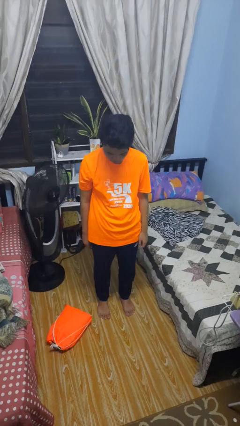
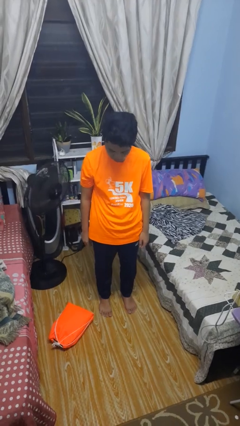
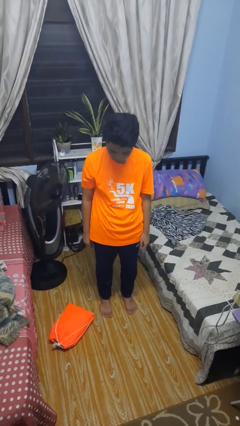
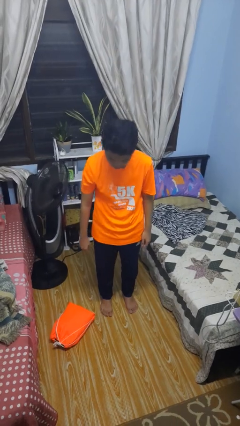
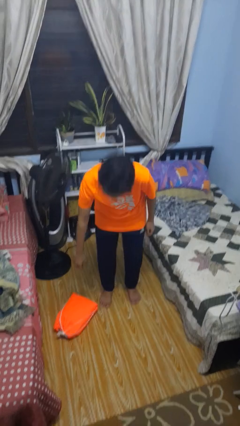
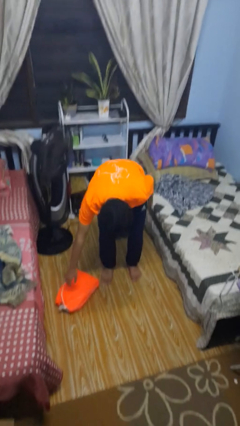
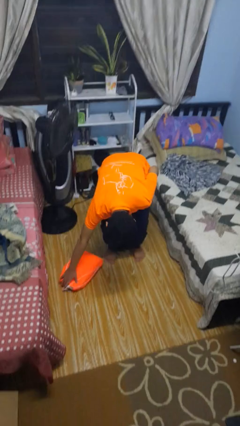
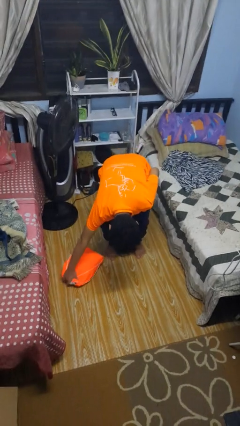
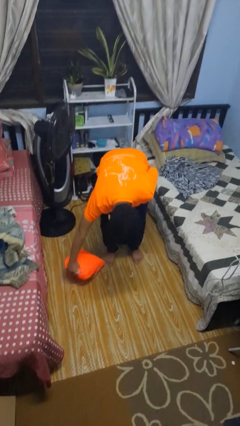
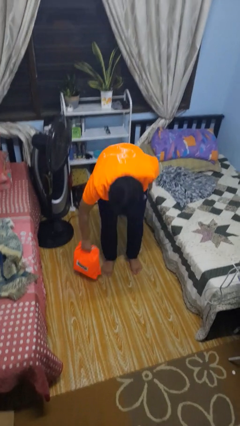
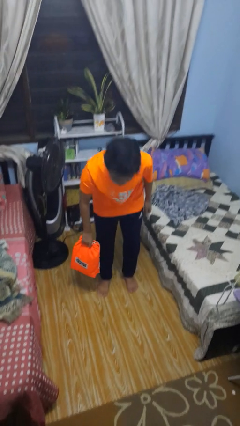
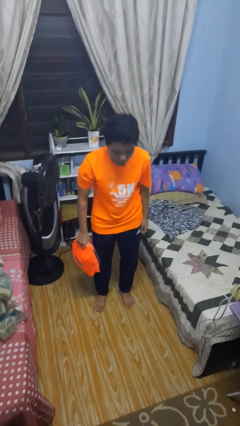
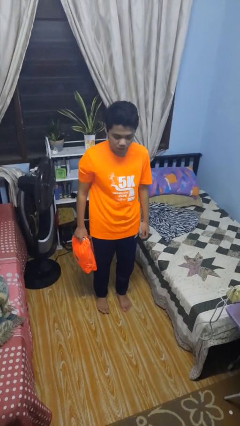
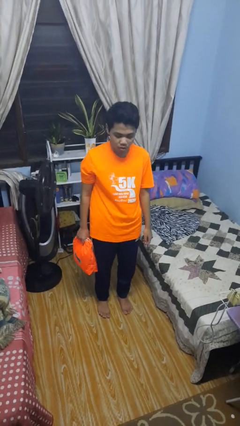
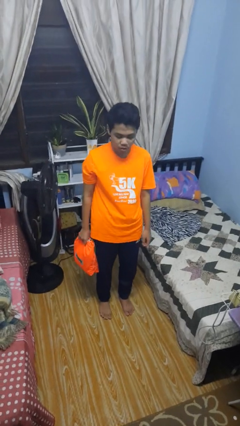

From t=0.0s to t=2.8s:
person picks up object from floor

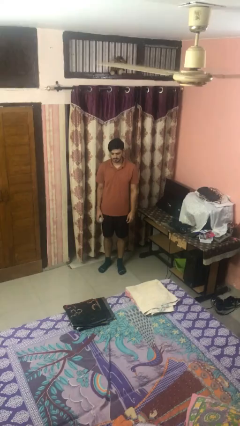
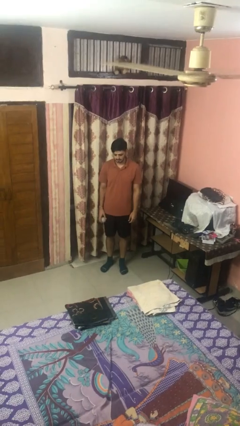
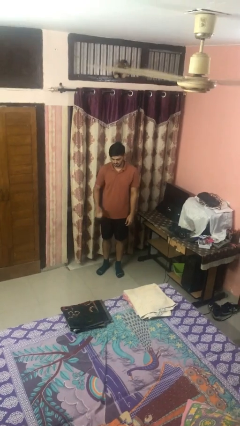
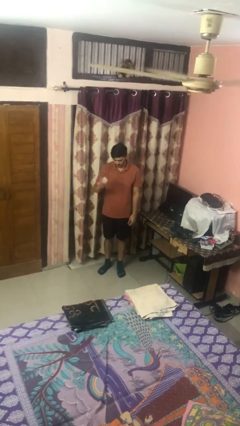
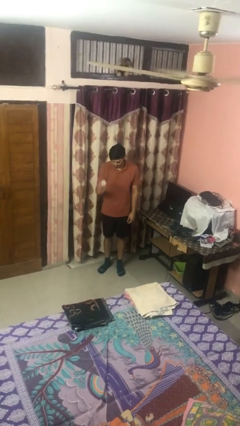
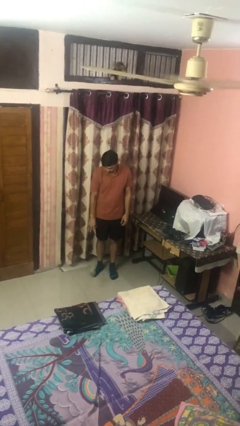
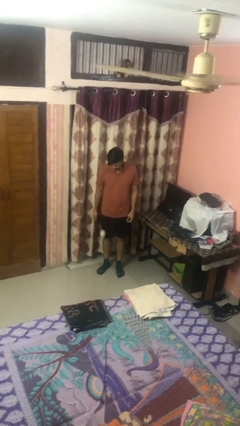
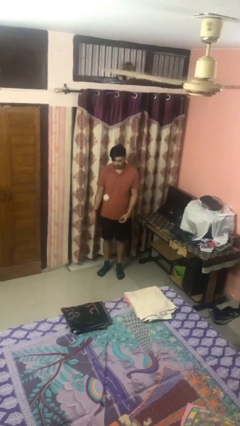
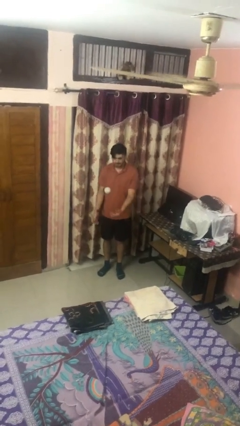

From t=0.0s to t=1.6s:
person bounces ball on floor

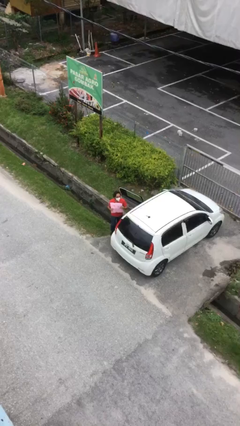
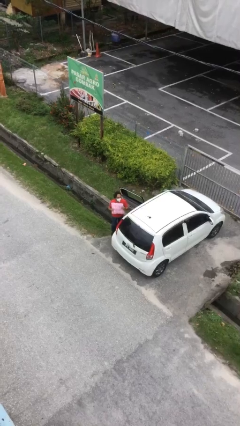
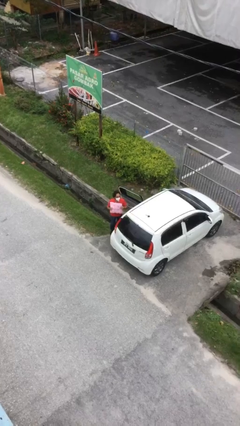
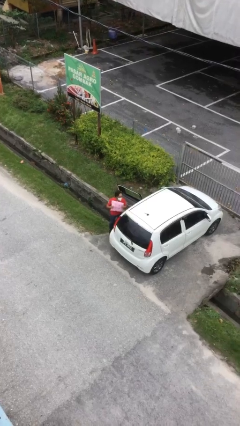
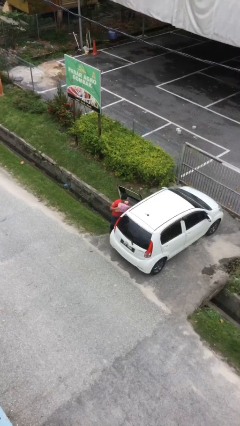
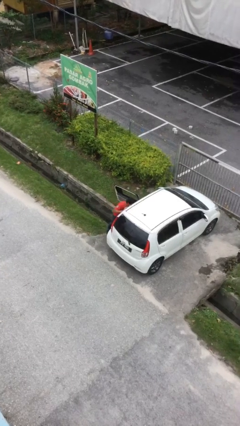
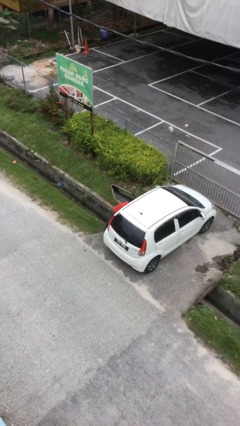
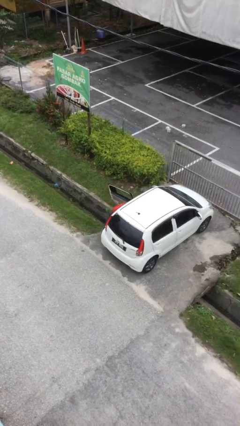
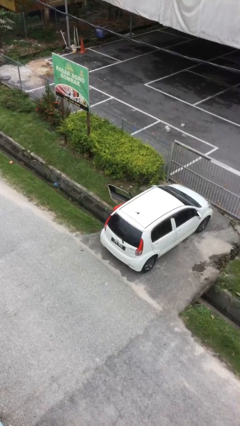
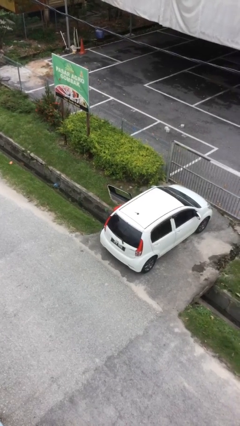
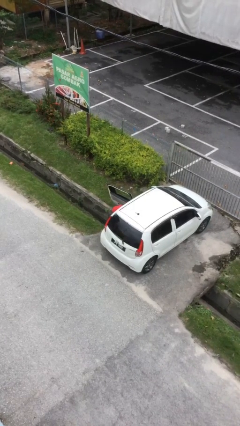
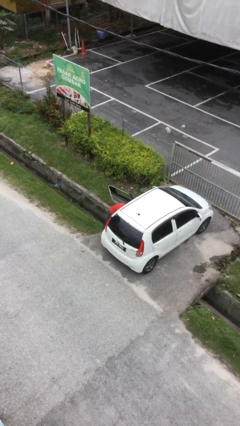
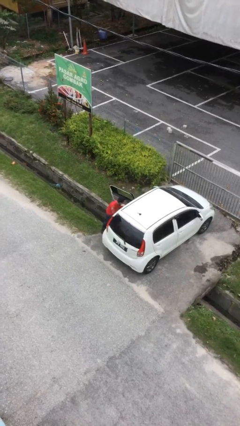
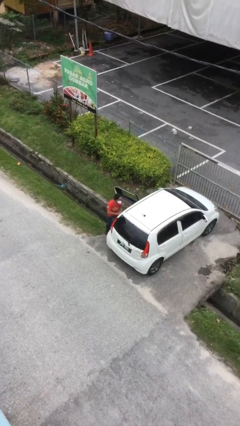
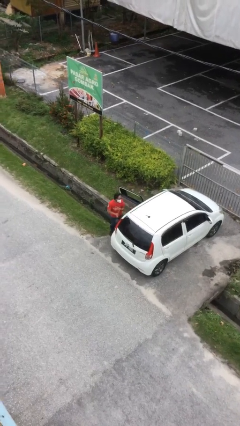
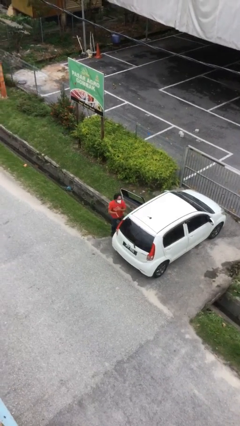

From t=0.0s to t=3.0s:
person loads car

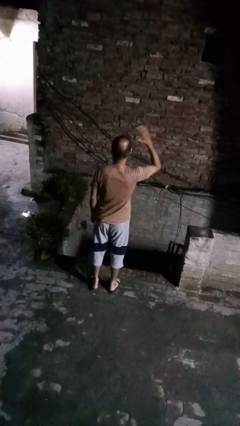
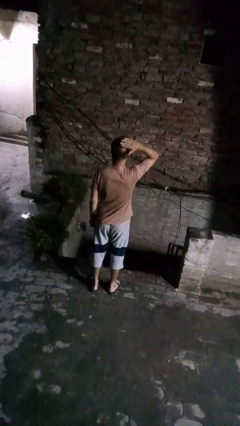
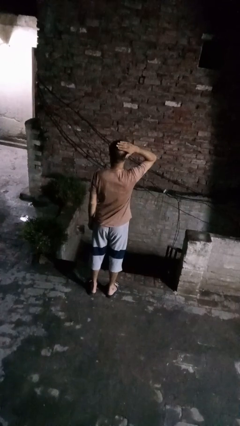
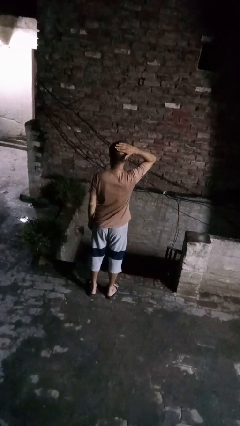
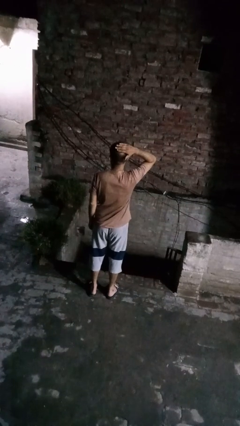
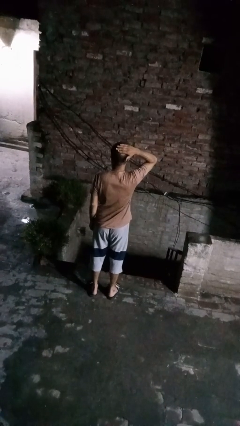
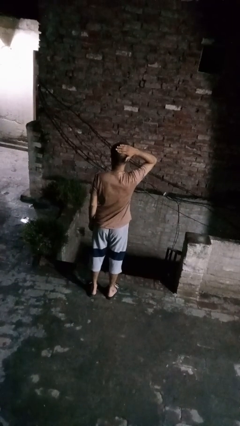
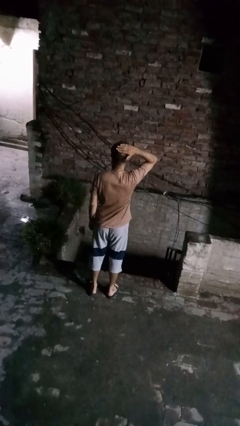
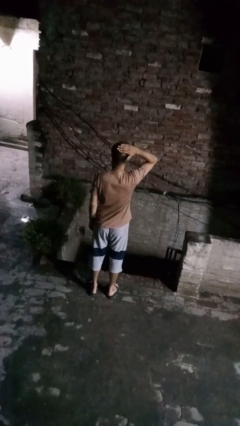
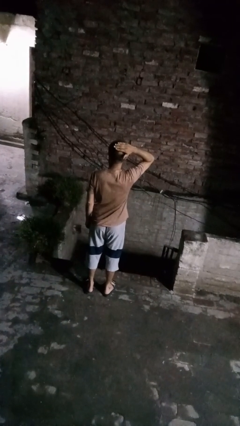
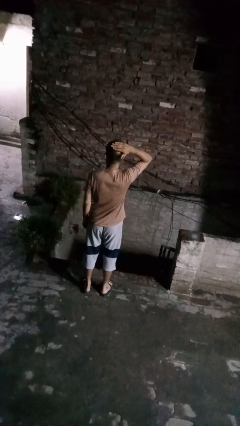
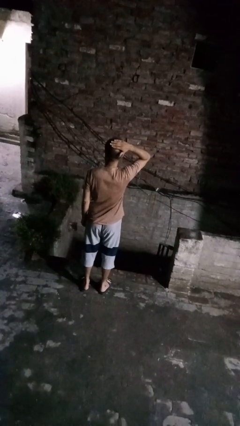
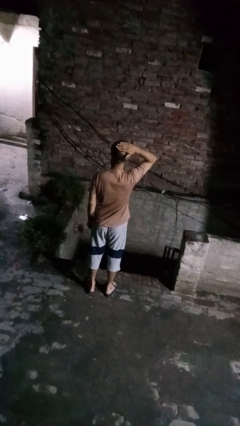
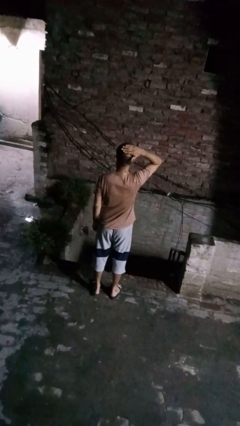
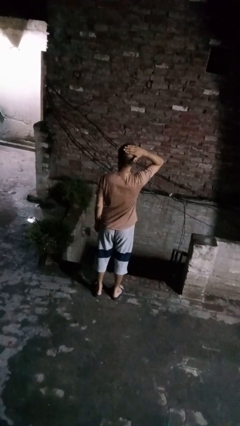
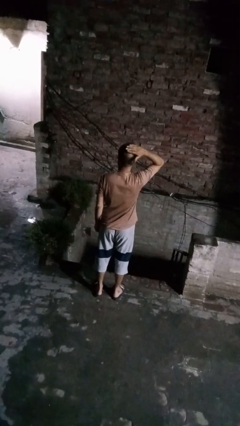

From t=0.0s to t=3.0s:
person pats head

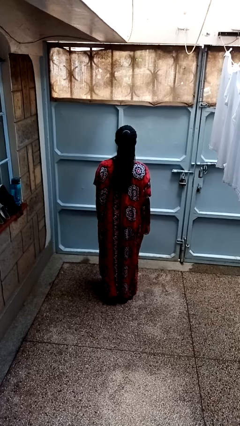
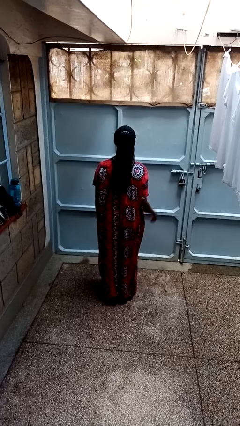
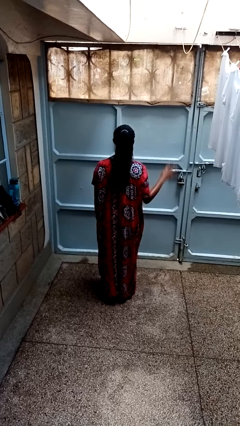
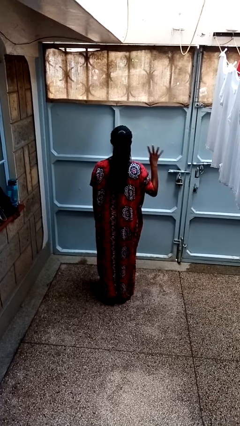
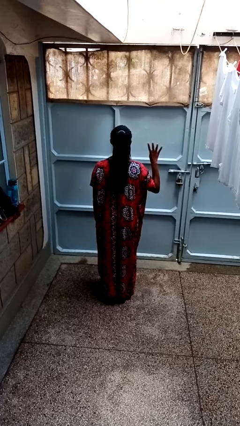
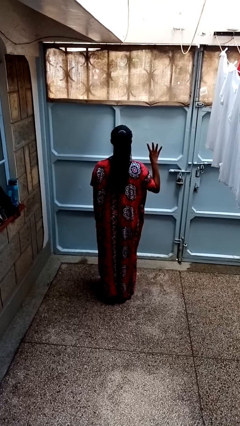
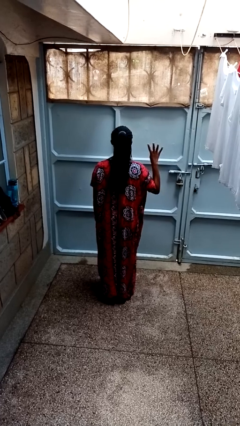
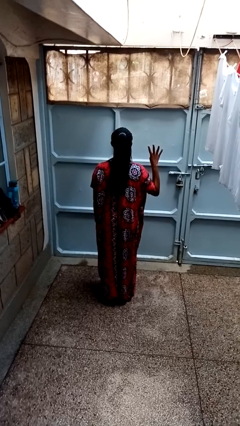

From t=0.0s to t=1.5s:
person gestures number four

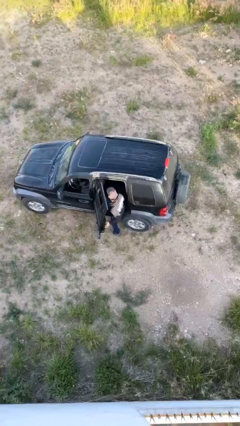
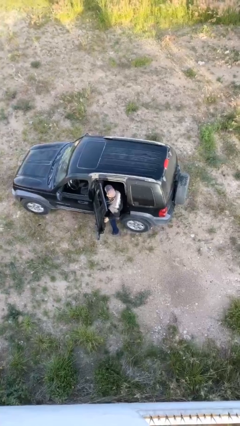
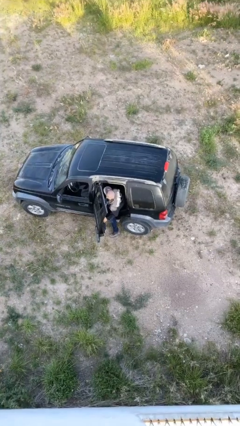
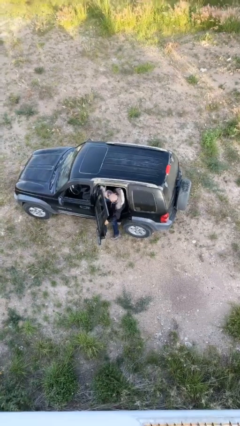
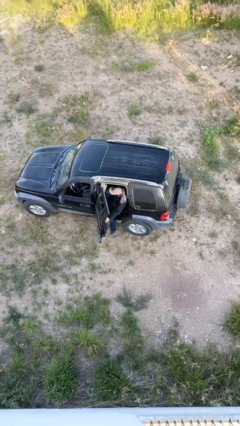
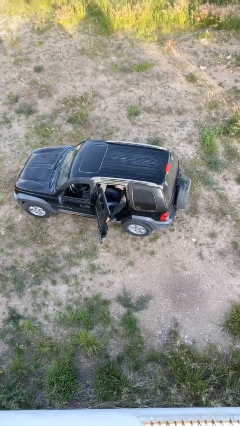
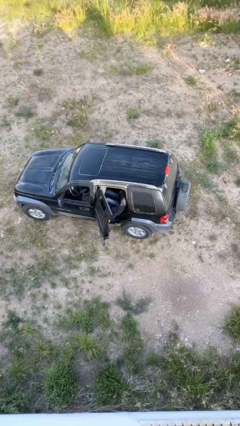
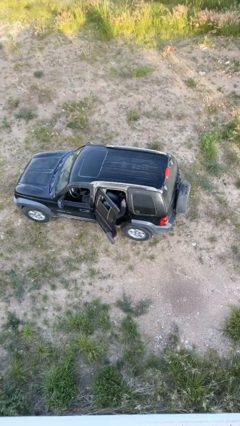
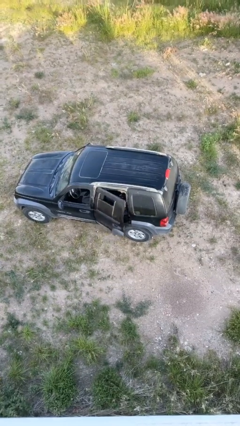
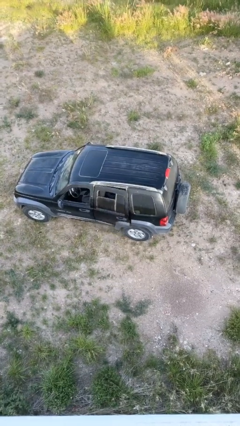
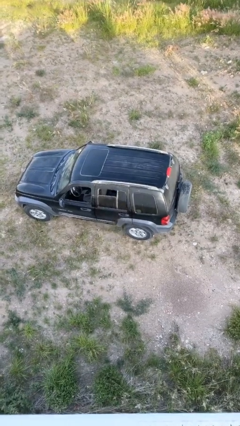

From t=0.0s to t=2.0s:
person enters car

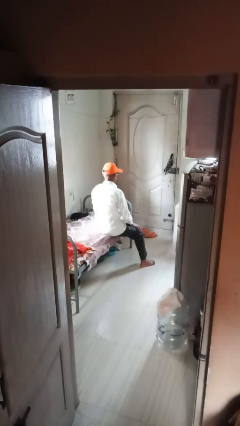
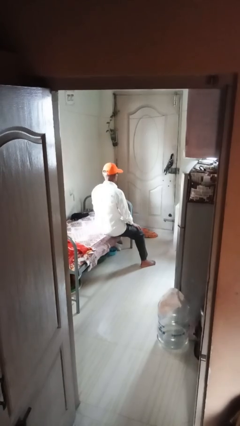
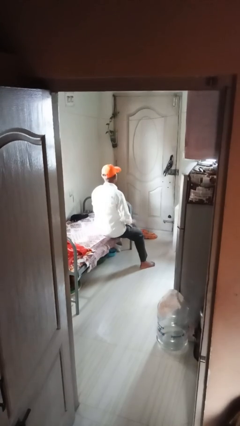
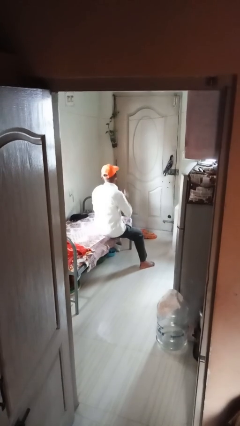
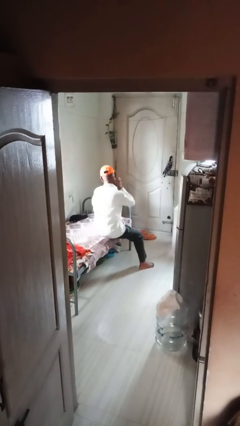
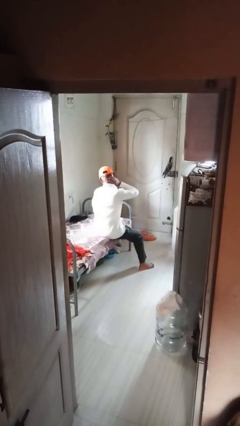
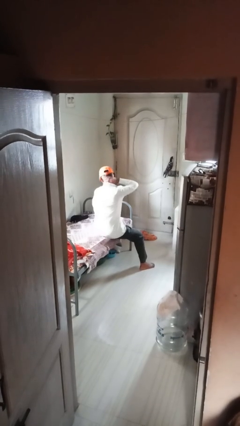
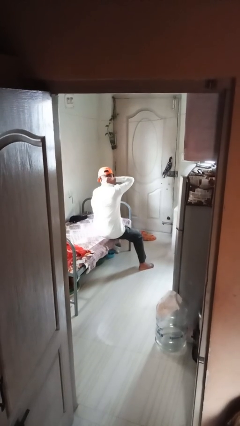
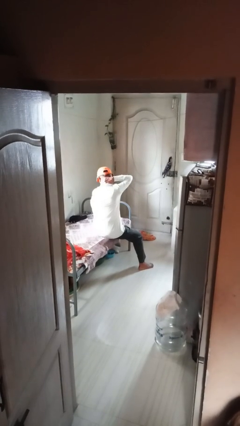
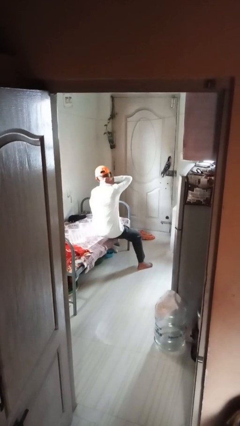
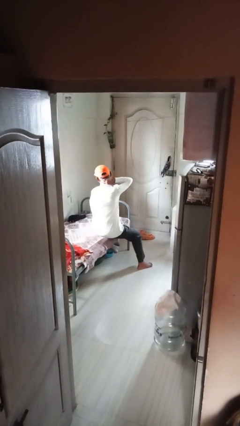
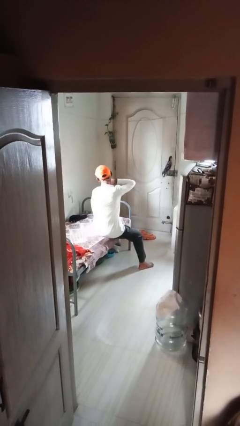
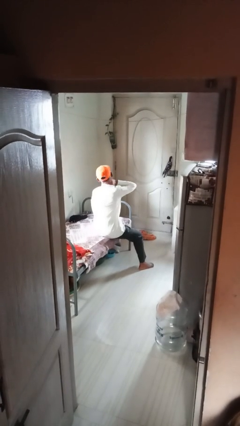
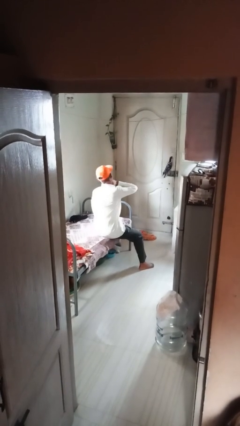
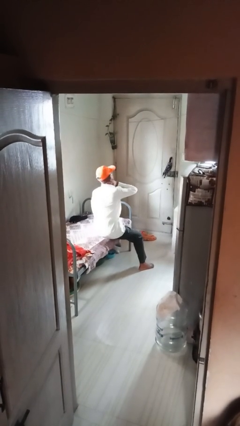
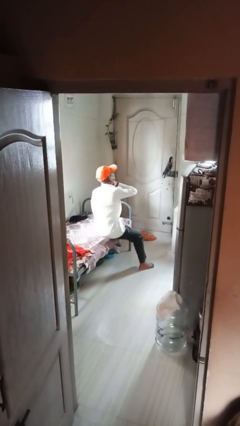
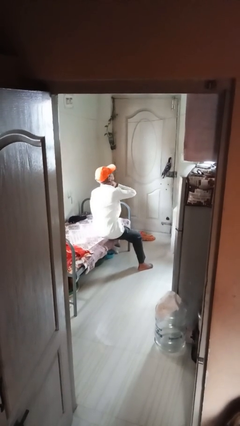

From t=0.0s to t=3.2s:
person rubs neck

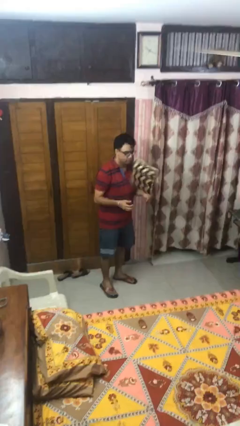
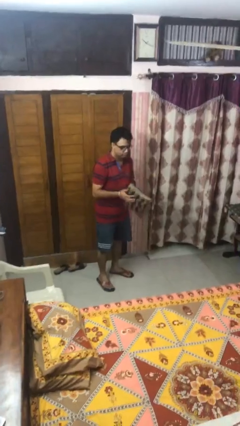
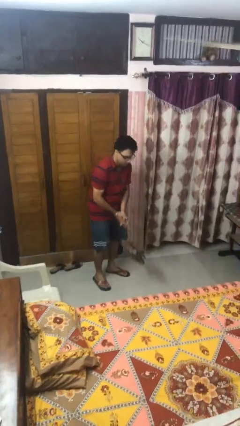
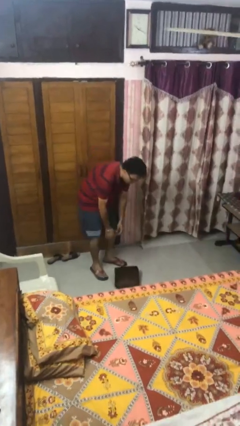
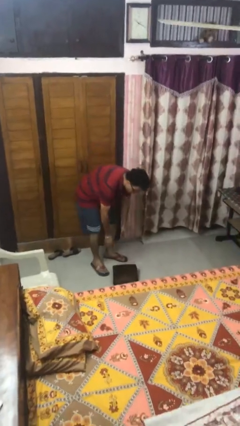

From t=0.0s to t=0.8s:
person drops object
